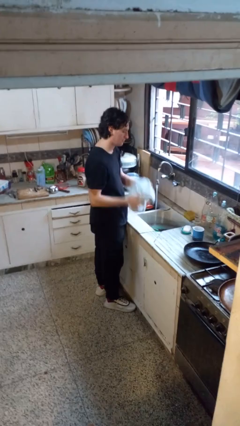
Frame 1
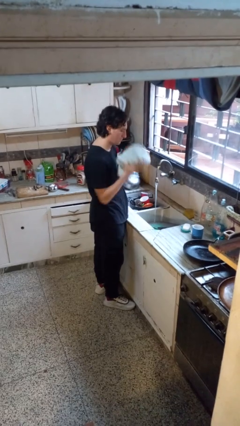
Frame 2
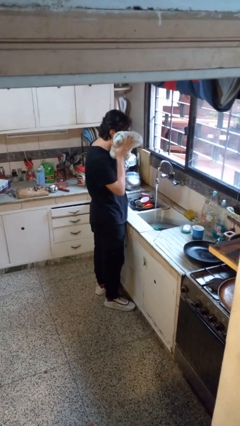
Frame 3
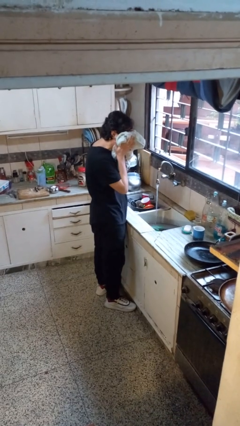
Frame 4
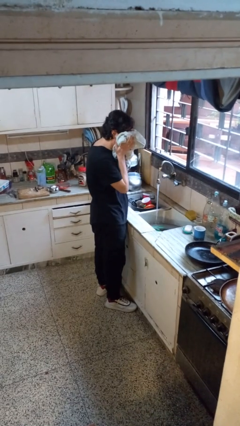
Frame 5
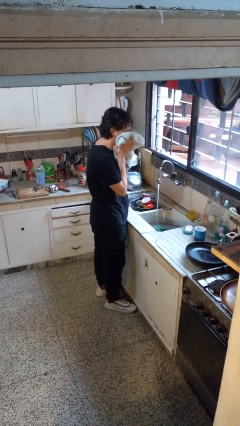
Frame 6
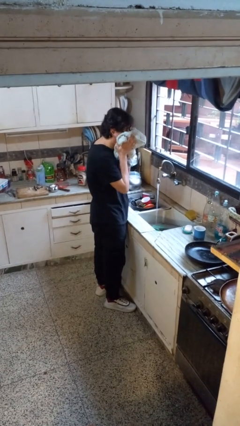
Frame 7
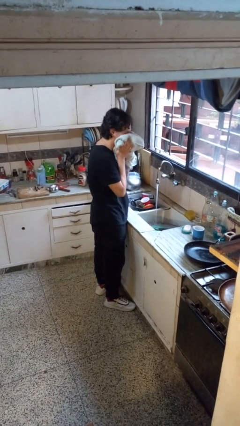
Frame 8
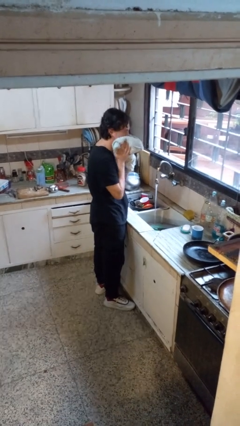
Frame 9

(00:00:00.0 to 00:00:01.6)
person dries face with towel

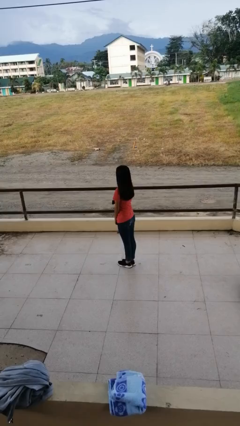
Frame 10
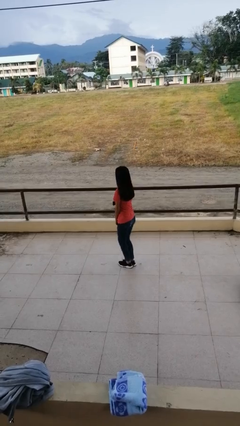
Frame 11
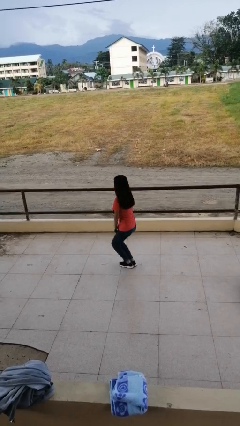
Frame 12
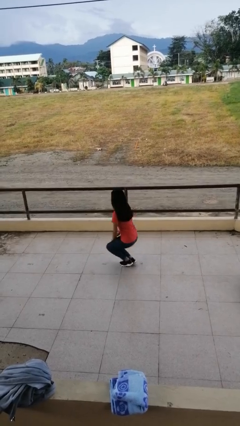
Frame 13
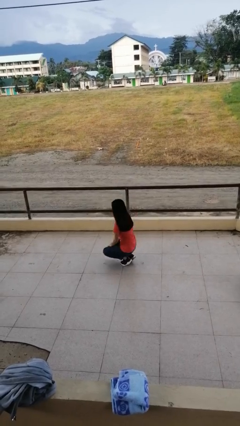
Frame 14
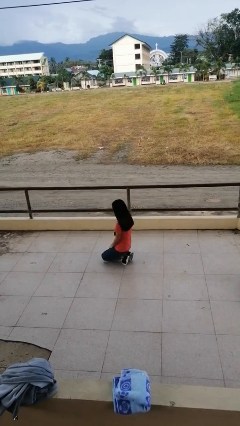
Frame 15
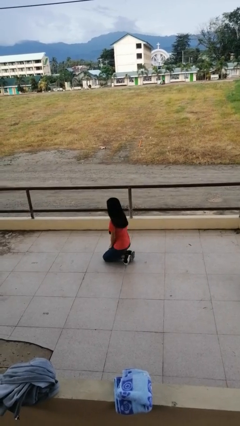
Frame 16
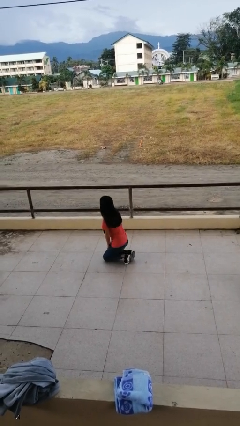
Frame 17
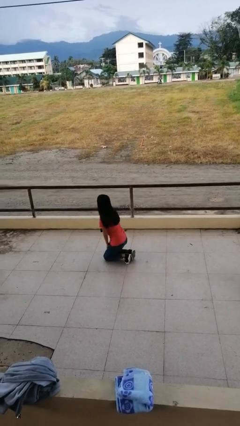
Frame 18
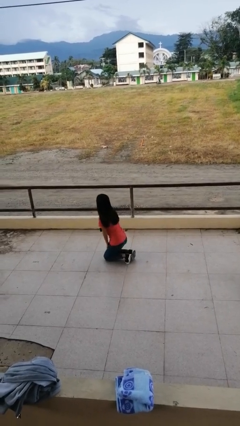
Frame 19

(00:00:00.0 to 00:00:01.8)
person kneels

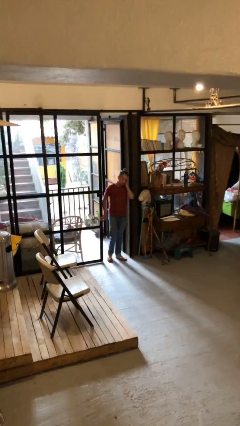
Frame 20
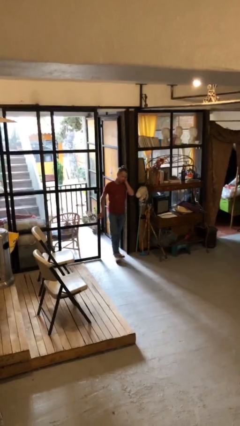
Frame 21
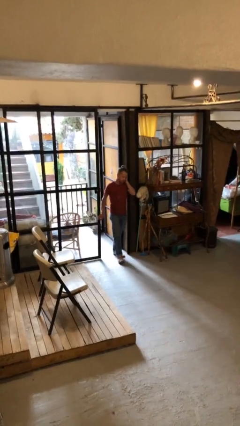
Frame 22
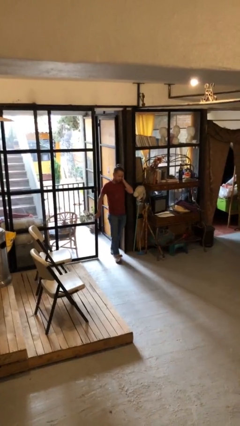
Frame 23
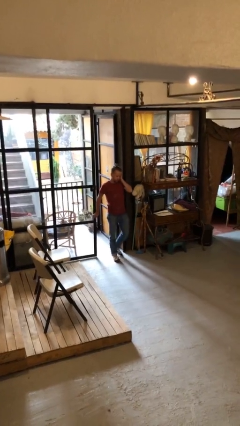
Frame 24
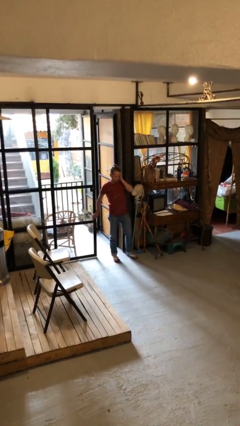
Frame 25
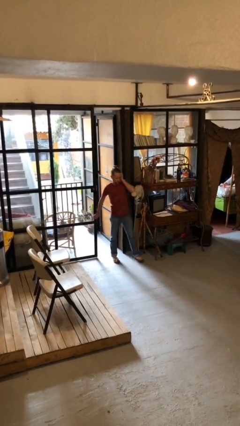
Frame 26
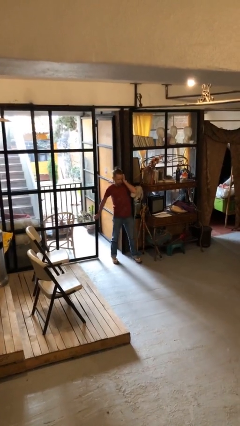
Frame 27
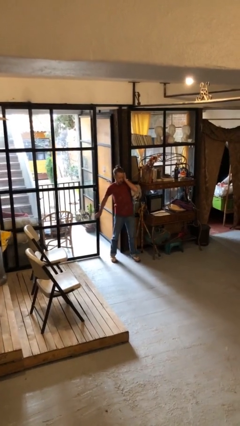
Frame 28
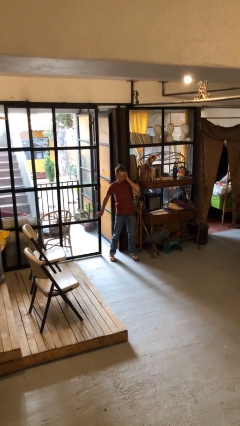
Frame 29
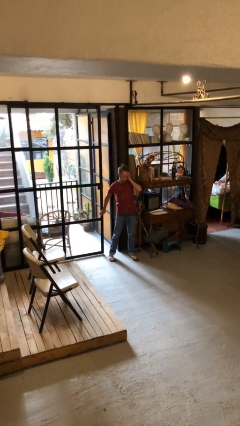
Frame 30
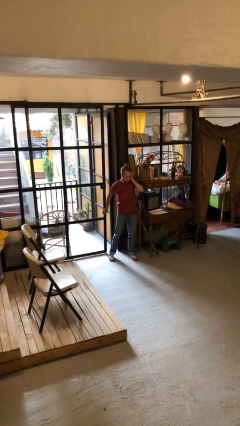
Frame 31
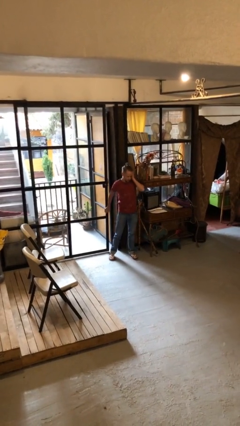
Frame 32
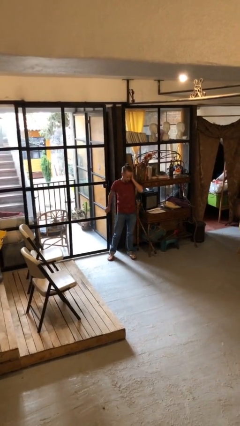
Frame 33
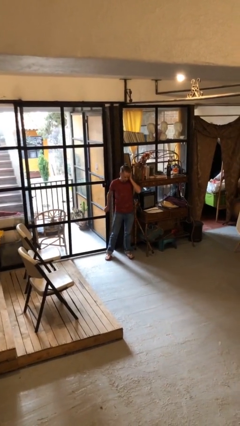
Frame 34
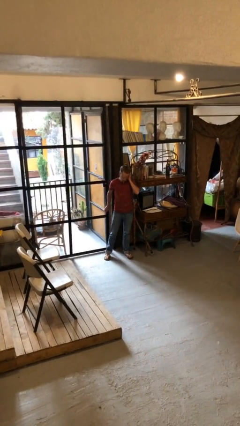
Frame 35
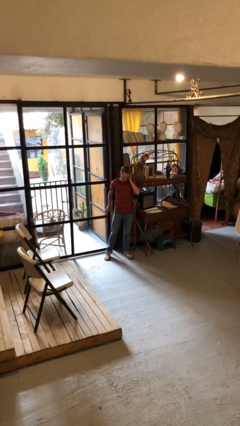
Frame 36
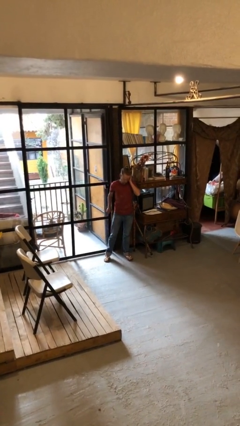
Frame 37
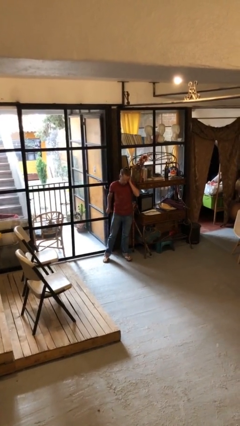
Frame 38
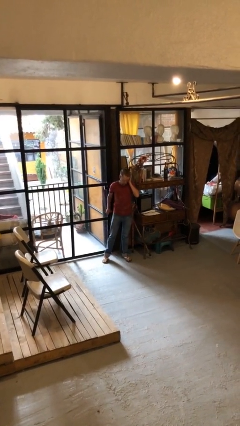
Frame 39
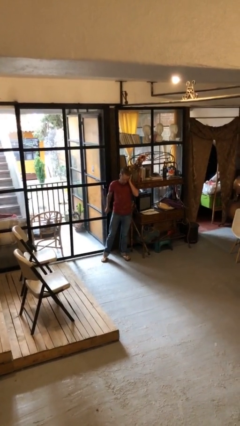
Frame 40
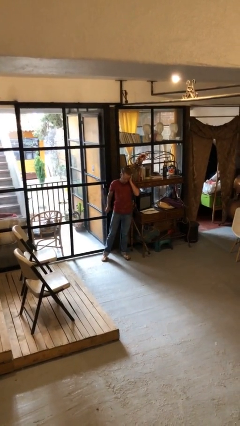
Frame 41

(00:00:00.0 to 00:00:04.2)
person closes facility door

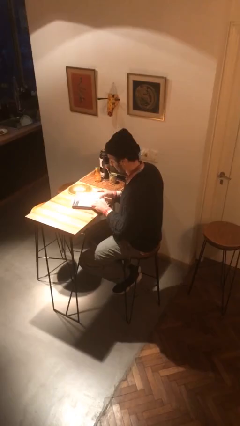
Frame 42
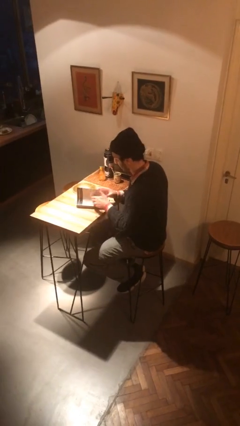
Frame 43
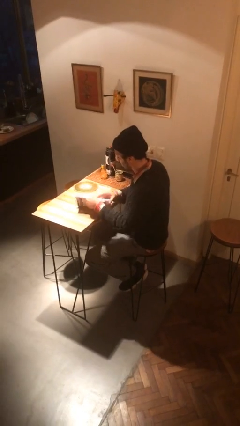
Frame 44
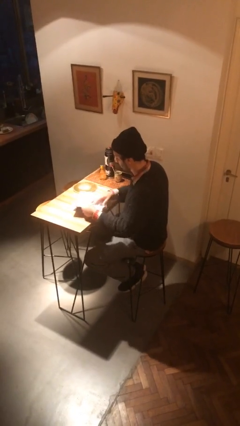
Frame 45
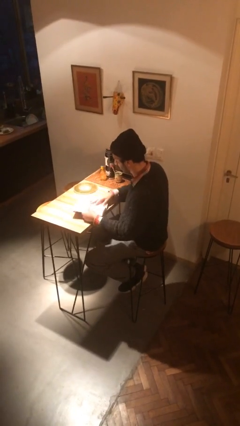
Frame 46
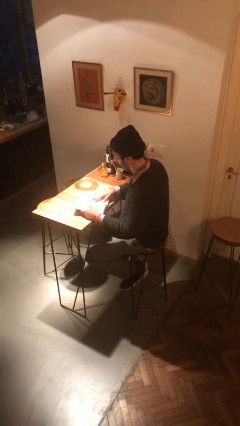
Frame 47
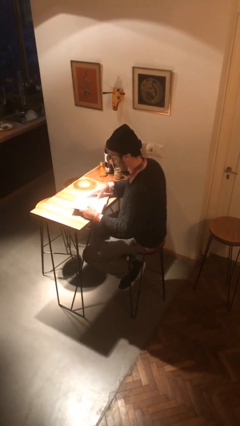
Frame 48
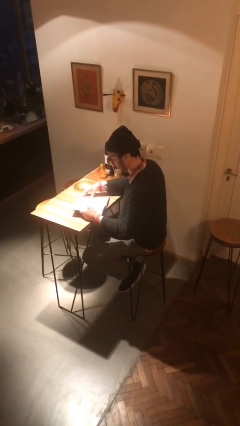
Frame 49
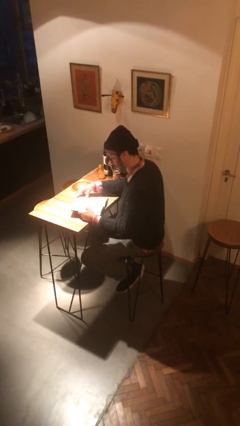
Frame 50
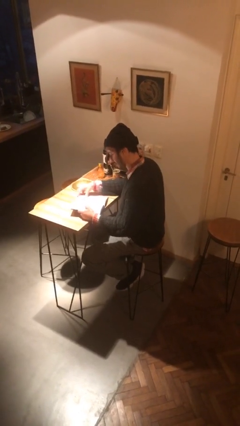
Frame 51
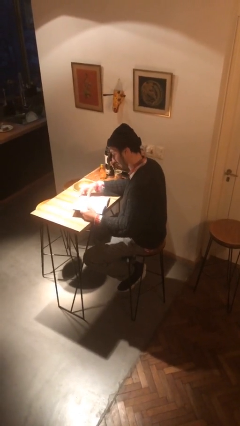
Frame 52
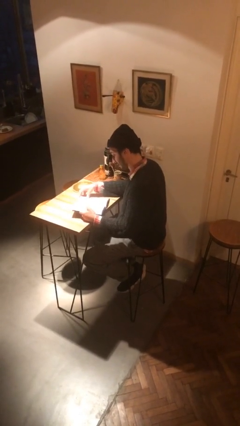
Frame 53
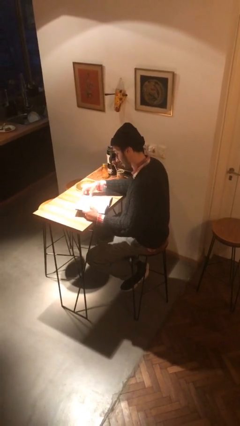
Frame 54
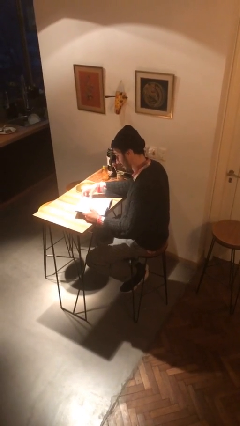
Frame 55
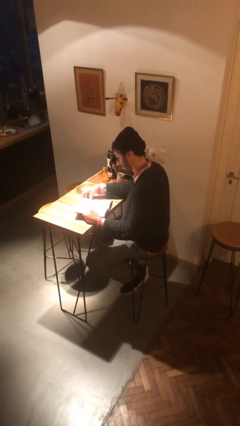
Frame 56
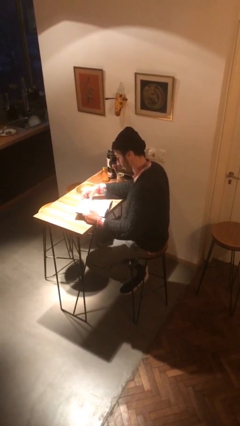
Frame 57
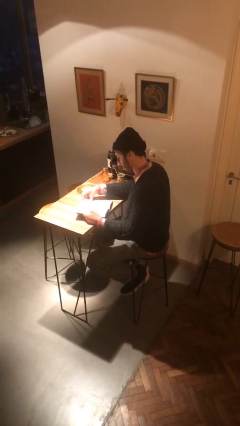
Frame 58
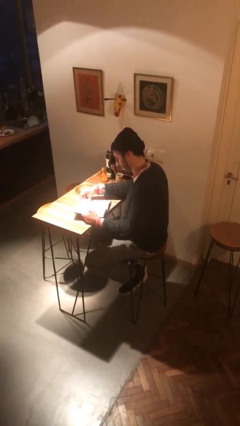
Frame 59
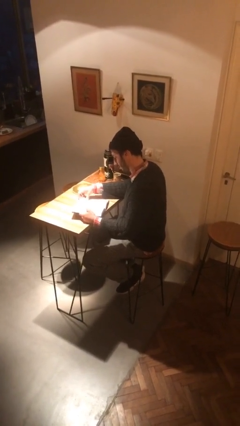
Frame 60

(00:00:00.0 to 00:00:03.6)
person reads book

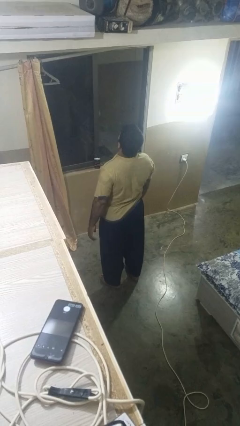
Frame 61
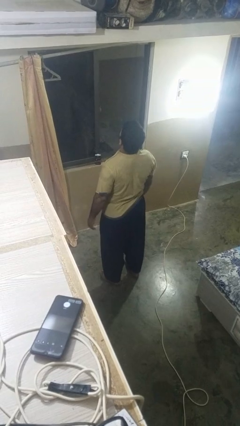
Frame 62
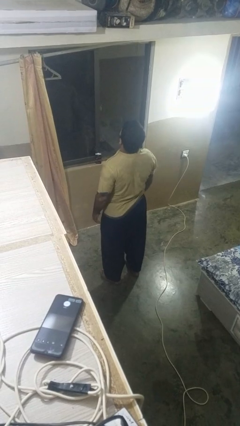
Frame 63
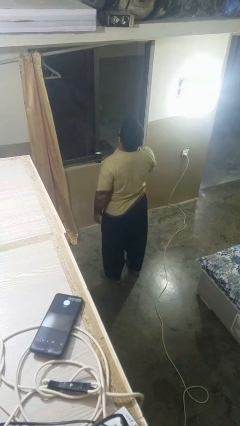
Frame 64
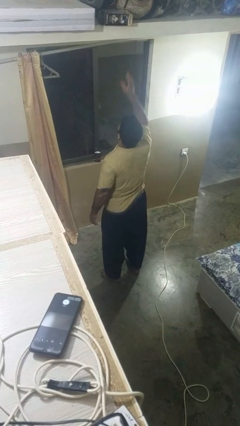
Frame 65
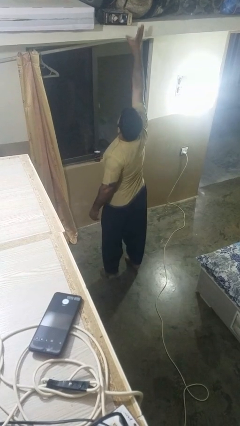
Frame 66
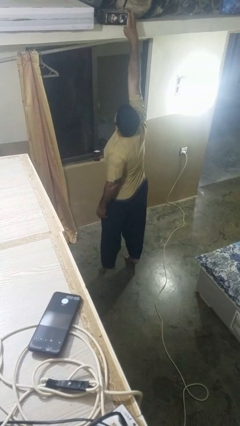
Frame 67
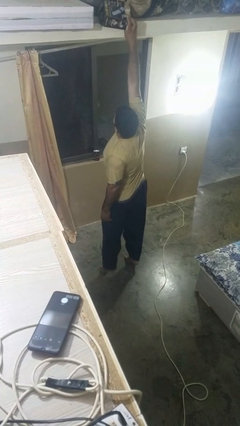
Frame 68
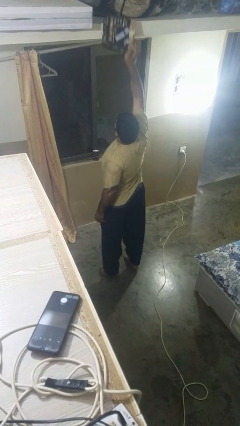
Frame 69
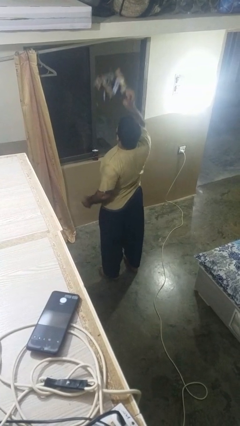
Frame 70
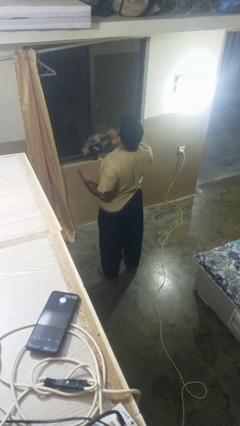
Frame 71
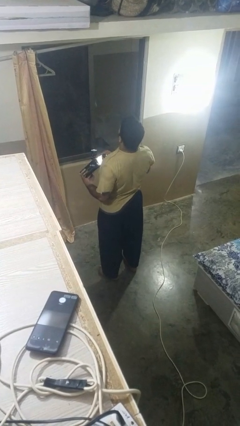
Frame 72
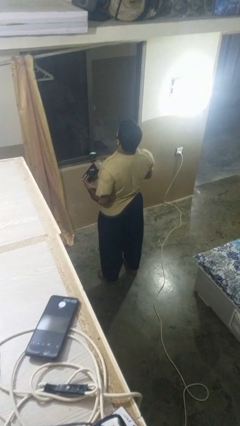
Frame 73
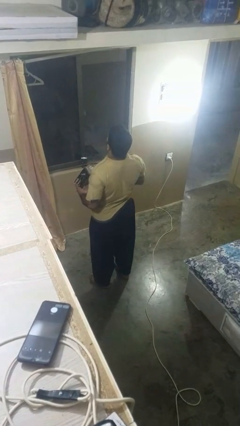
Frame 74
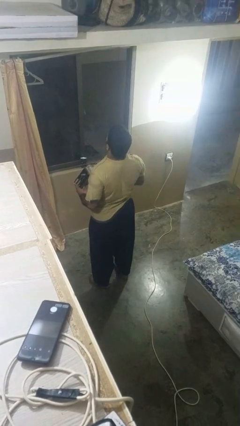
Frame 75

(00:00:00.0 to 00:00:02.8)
person picks up object from shelf

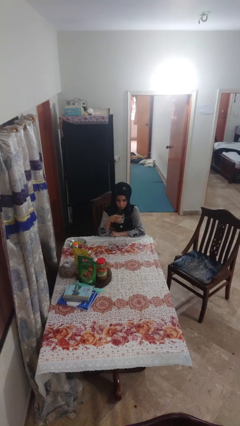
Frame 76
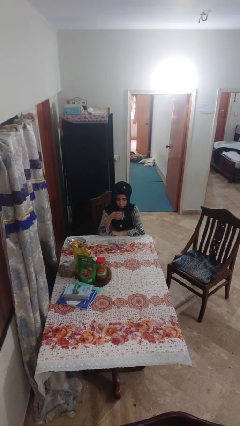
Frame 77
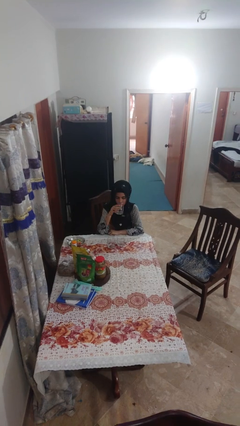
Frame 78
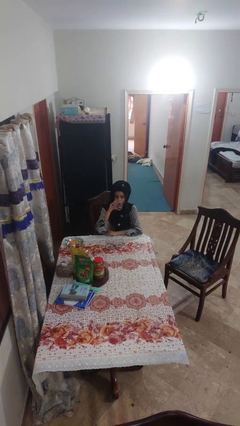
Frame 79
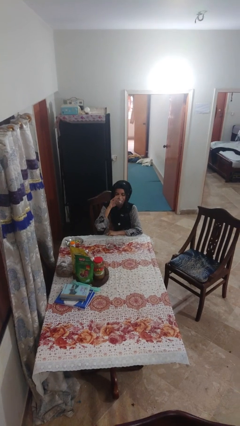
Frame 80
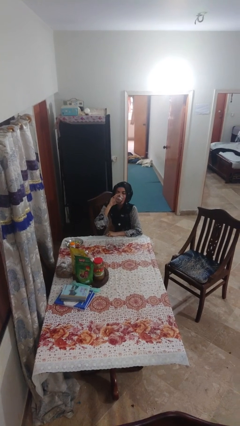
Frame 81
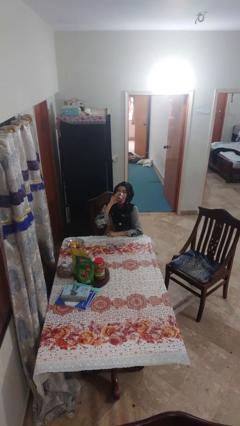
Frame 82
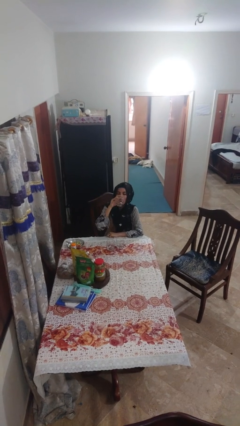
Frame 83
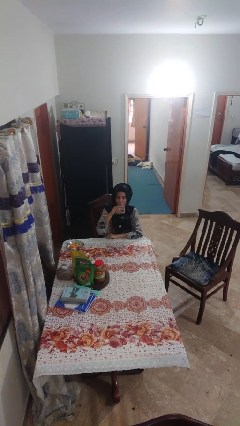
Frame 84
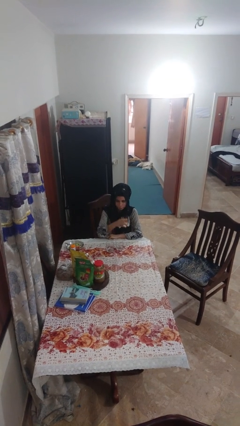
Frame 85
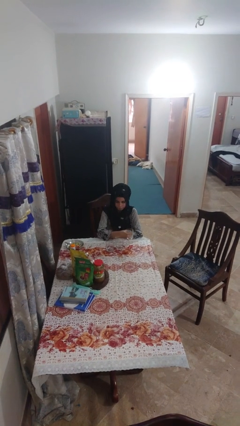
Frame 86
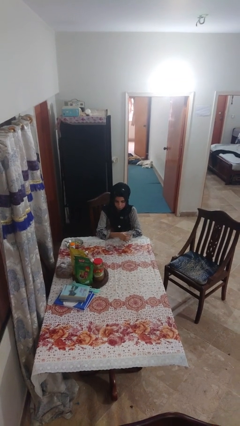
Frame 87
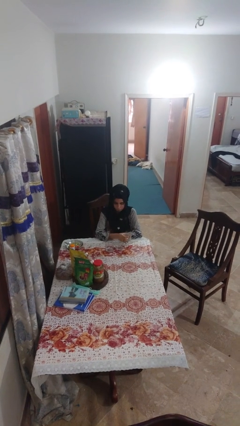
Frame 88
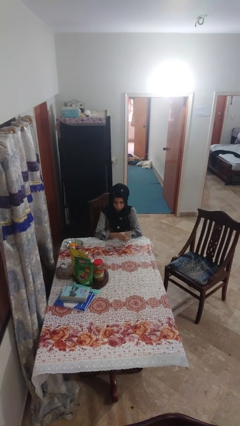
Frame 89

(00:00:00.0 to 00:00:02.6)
person drinks from shotglass

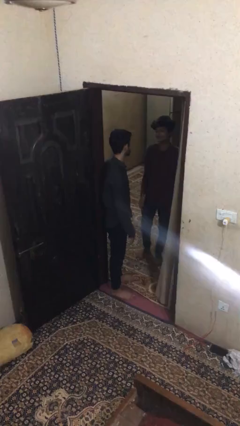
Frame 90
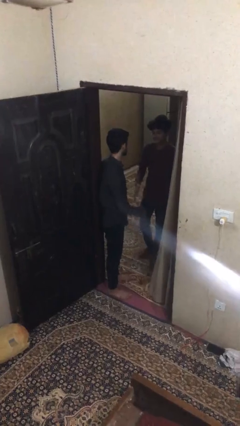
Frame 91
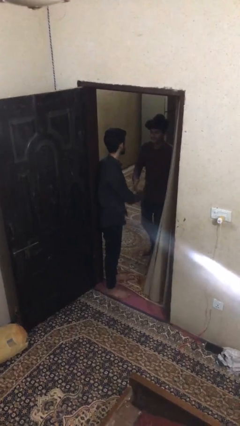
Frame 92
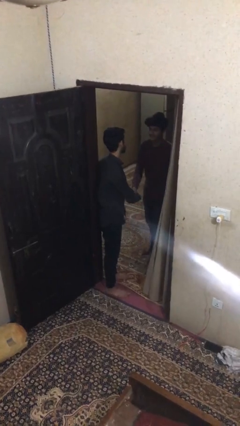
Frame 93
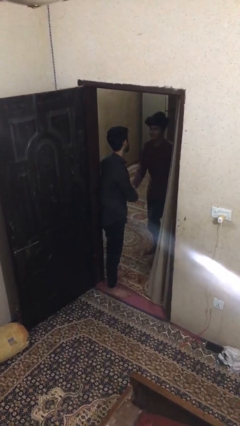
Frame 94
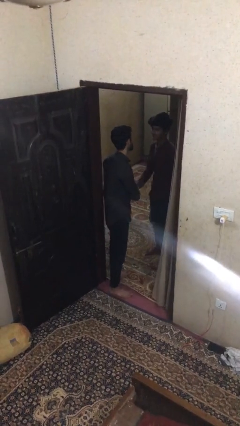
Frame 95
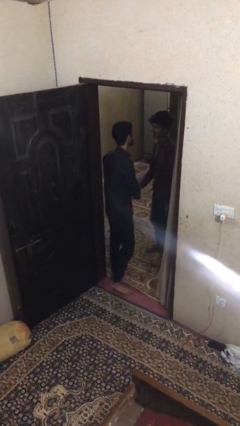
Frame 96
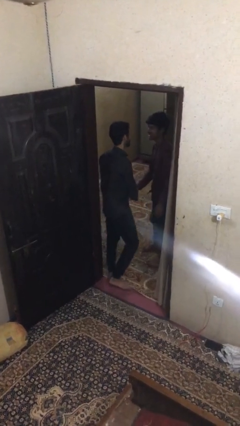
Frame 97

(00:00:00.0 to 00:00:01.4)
person shakes hand
